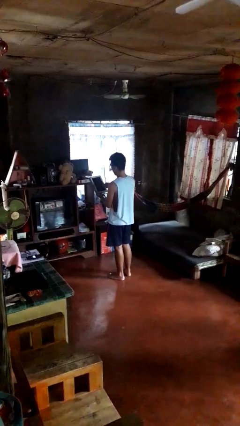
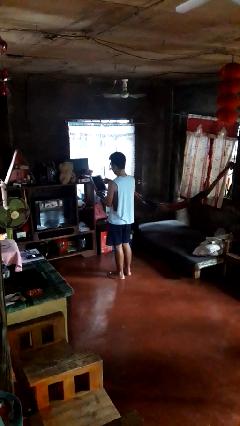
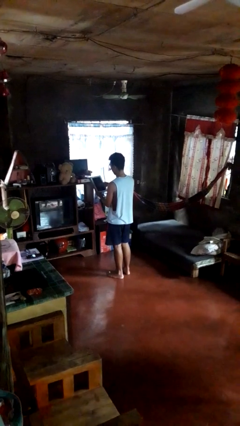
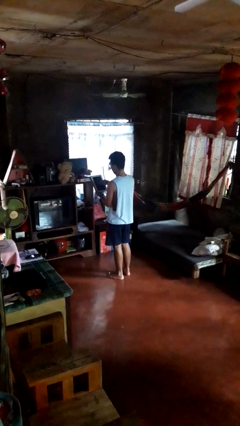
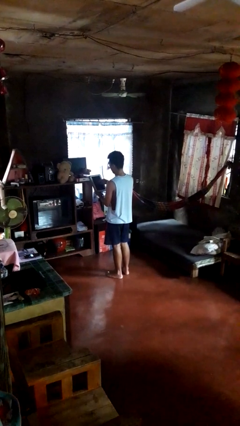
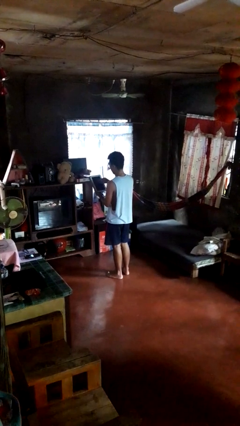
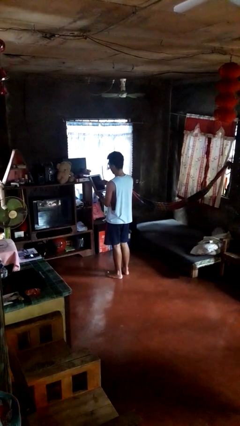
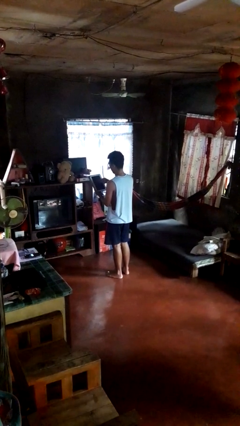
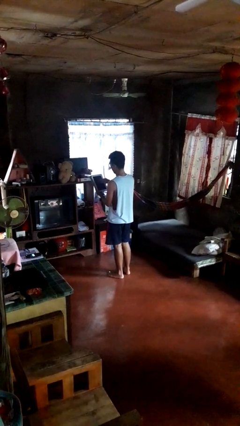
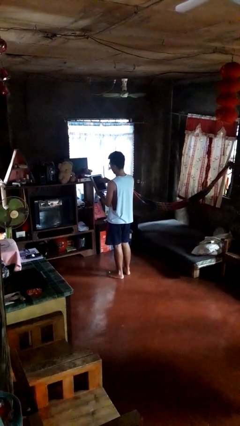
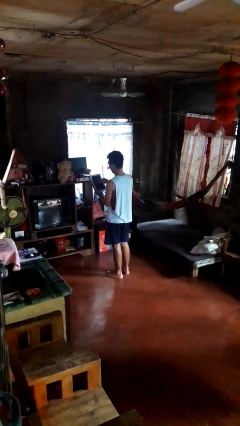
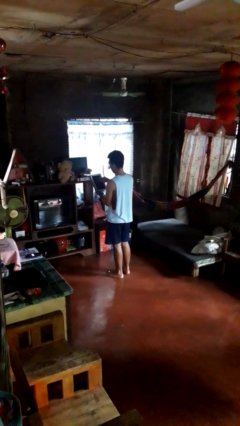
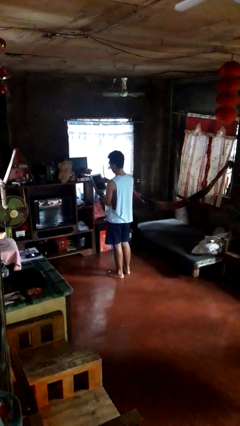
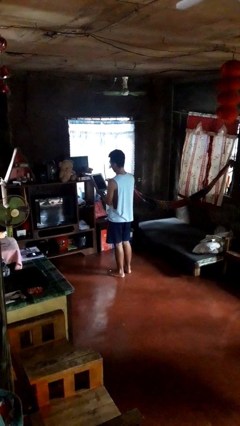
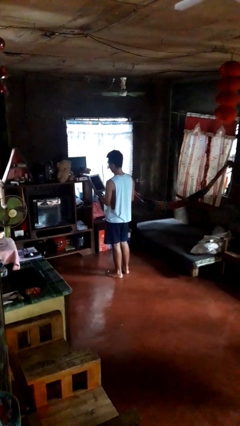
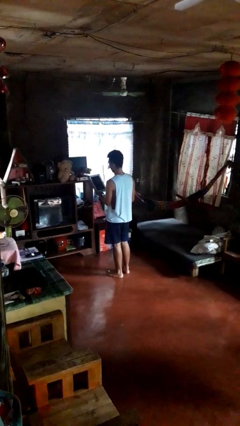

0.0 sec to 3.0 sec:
person interacts with tablet

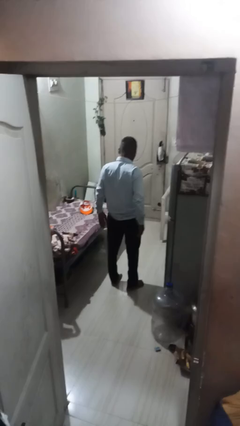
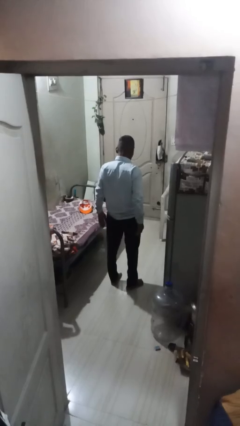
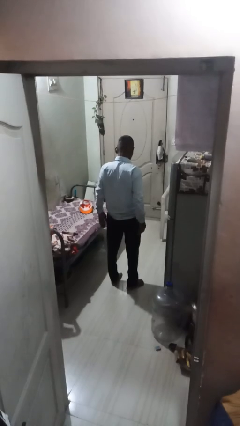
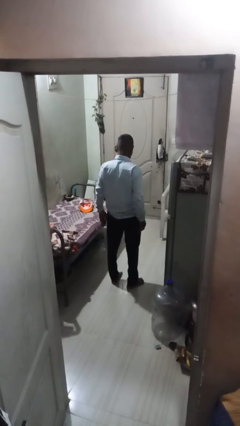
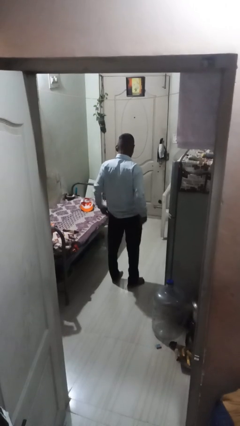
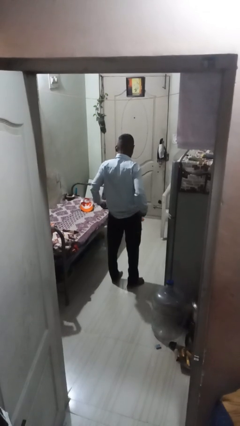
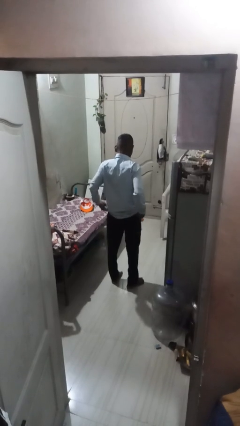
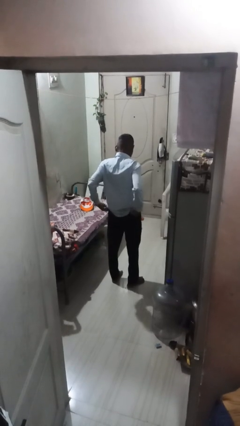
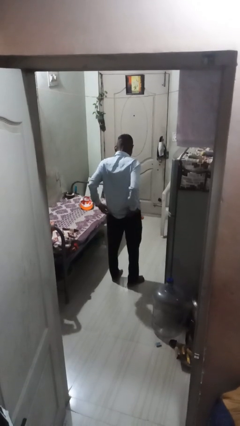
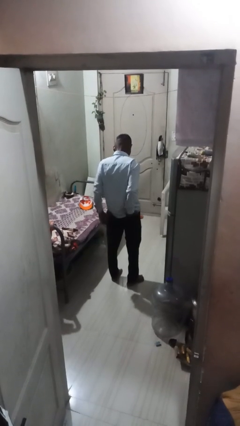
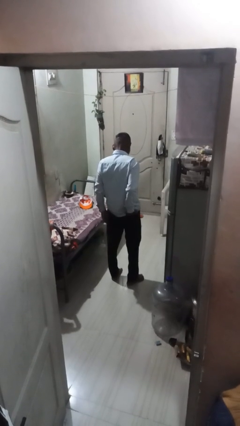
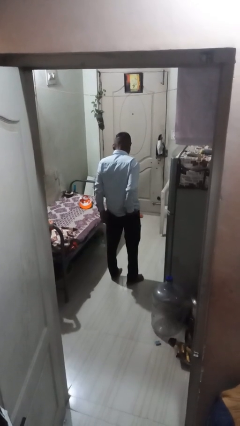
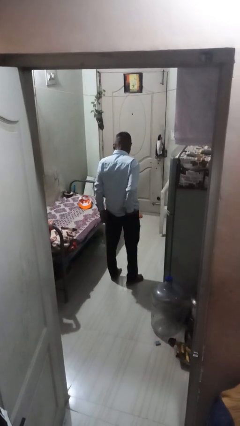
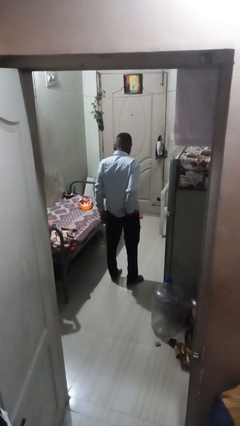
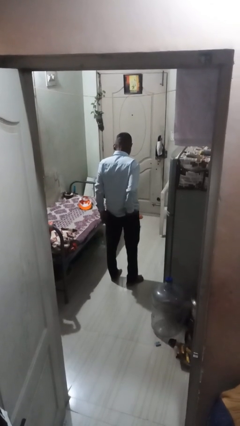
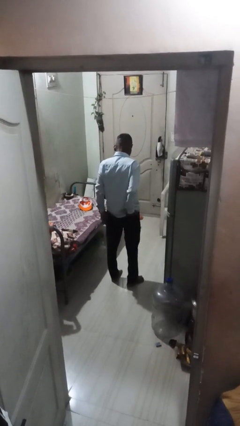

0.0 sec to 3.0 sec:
person puts hands in back pockets

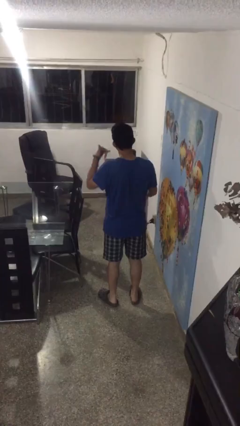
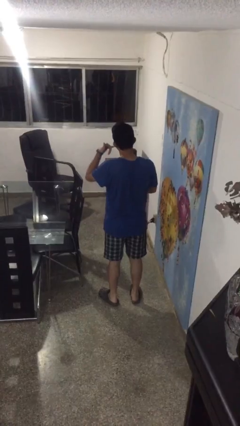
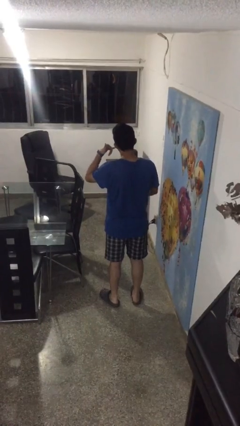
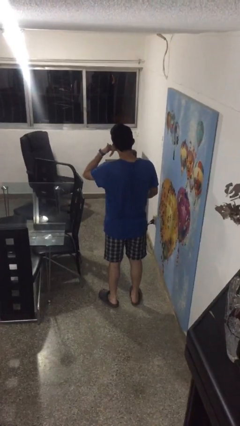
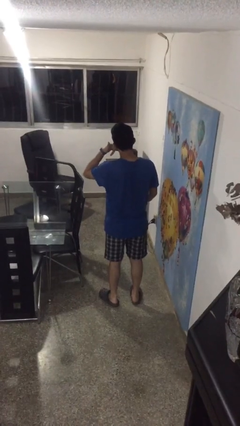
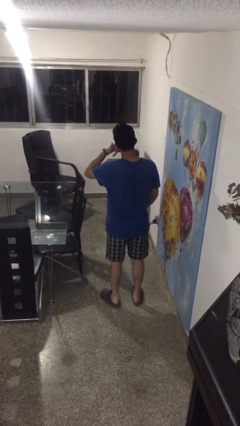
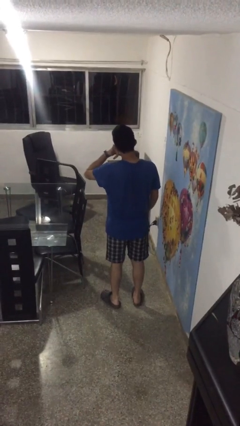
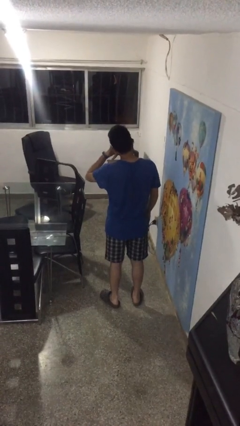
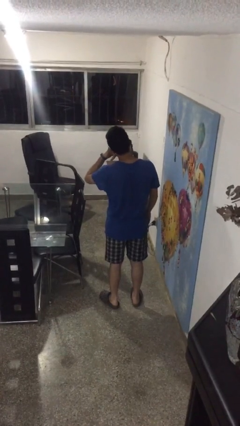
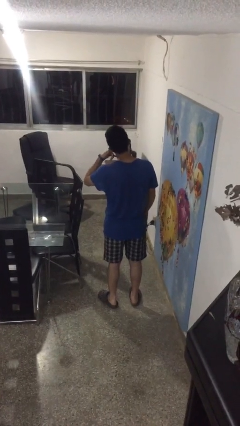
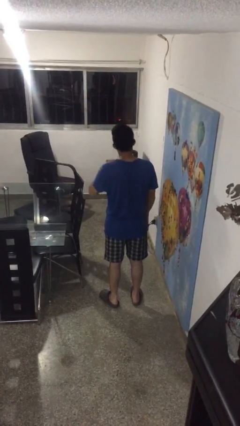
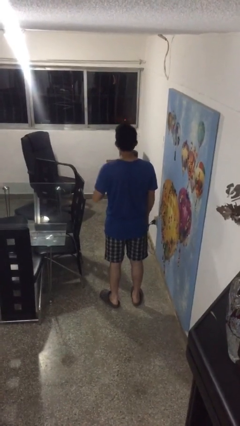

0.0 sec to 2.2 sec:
person gestures call me

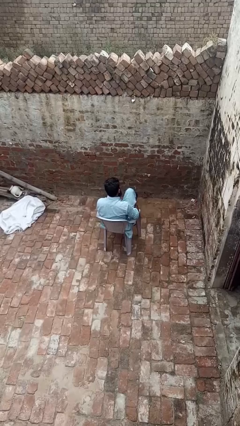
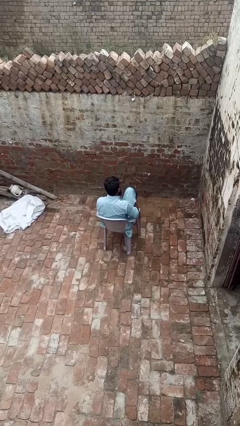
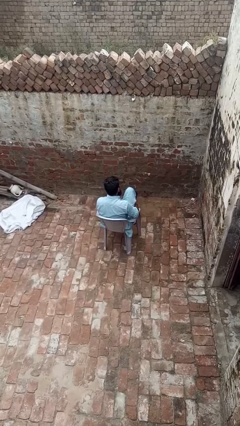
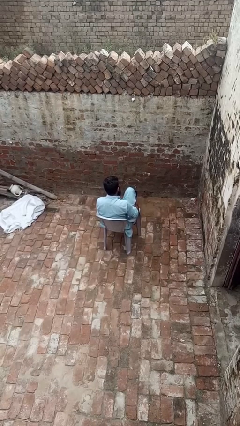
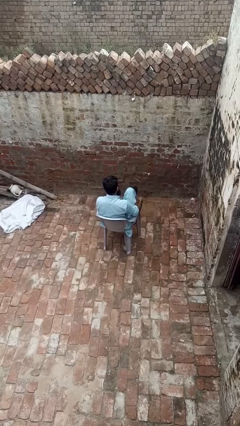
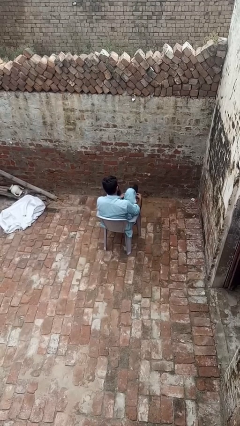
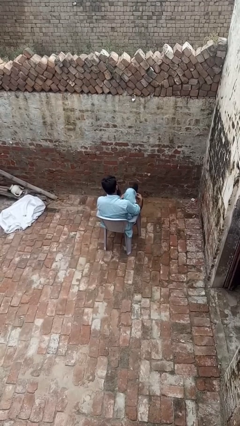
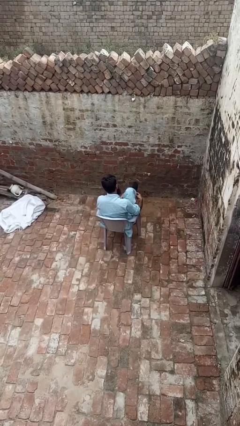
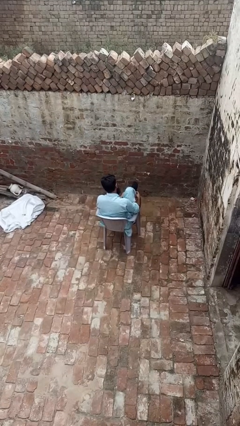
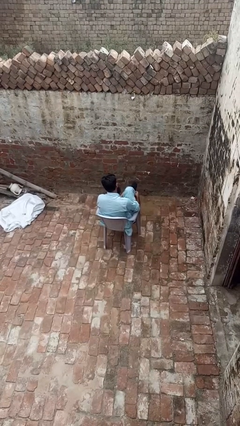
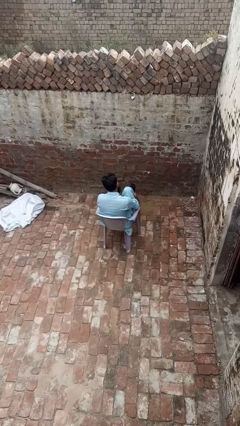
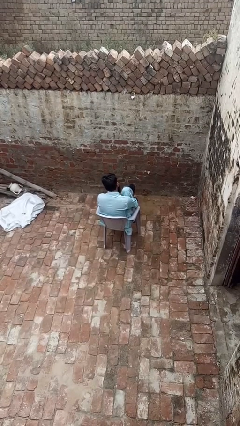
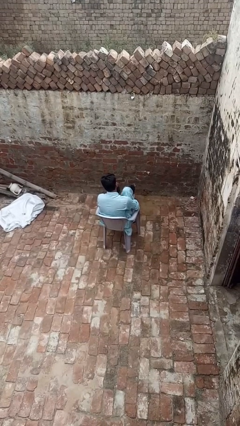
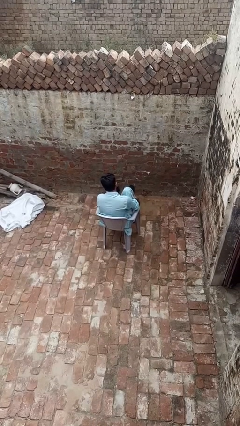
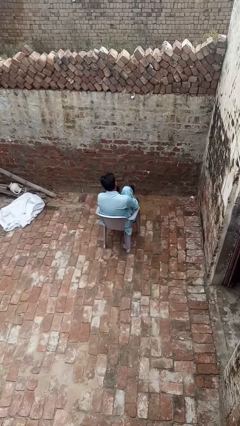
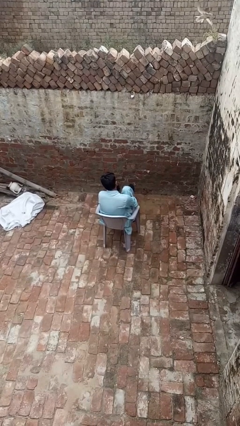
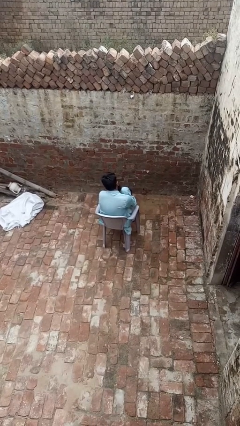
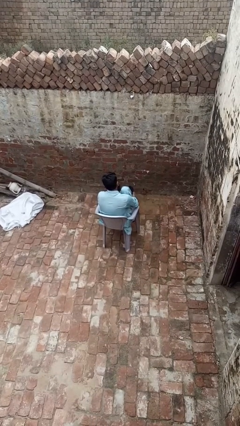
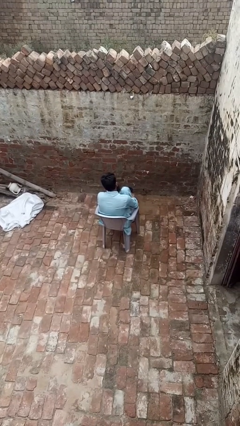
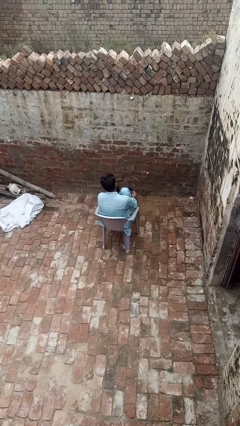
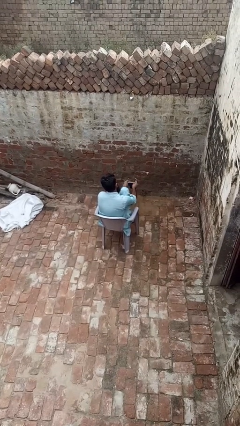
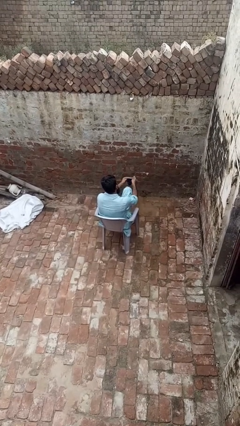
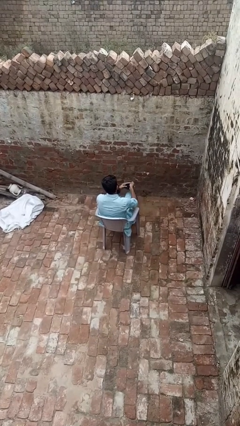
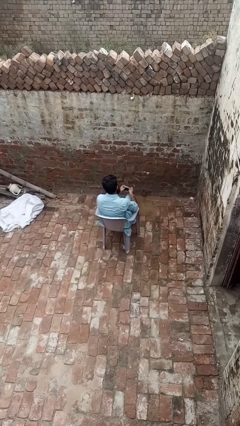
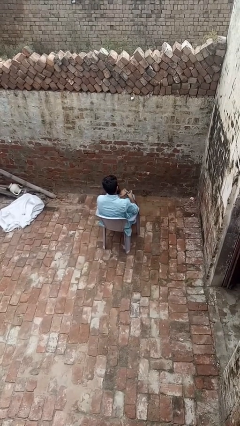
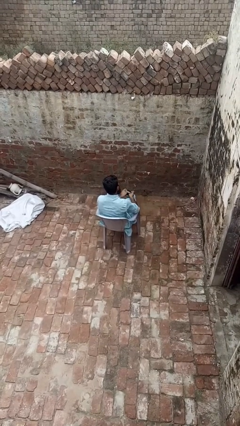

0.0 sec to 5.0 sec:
person takes off socks

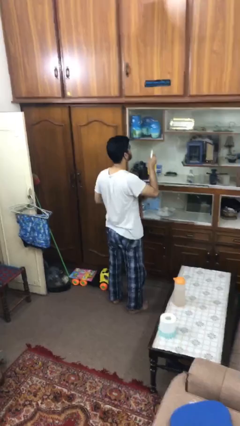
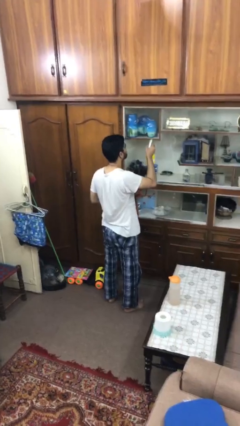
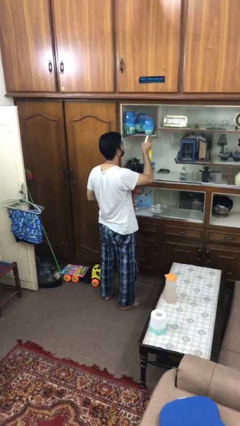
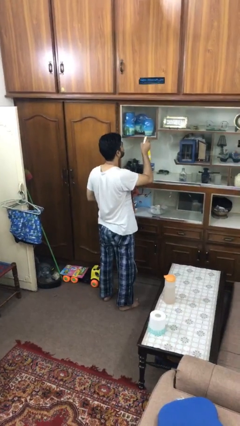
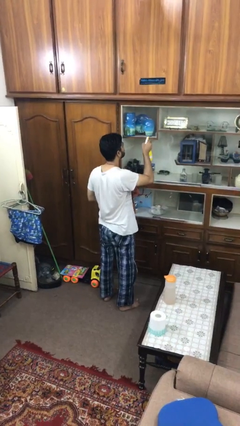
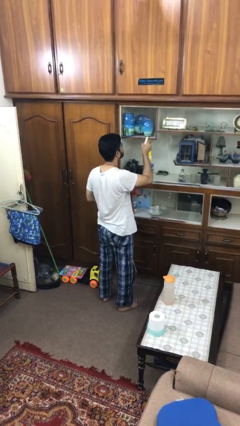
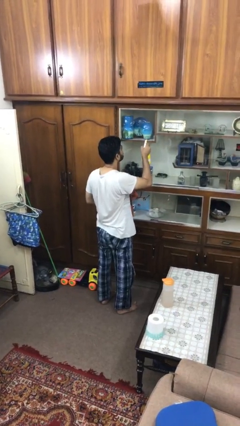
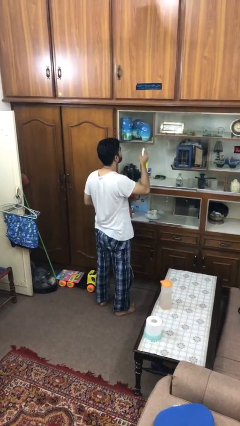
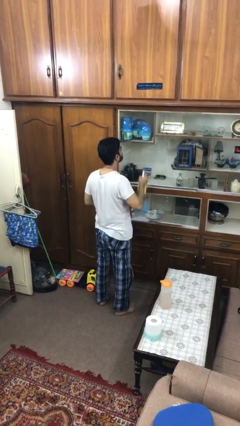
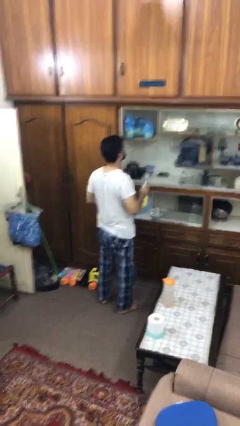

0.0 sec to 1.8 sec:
person sprays from bottle

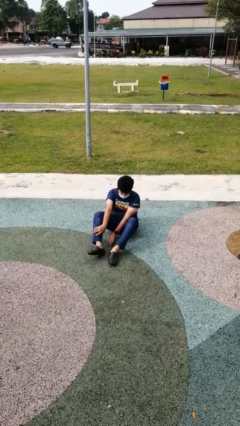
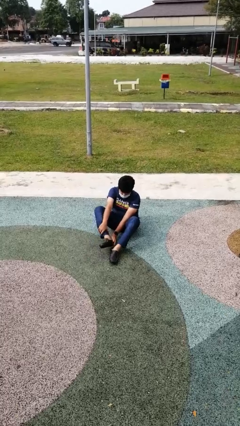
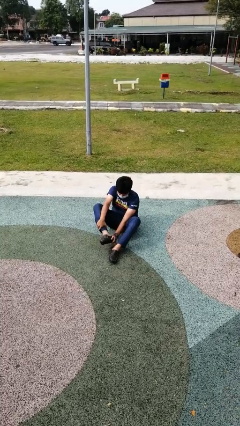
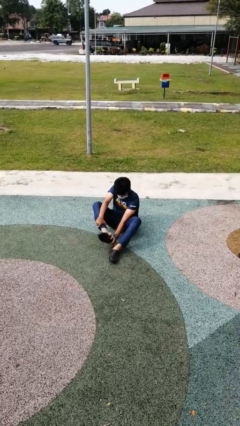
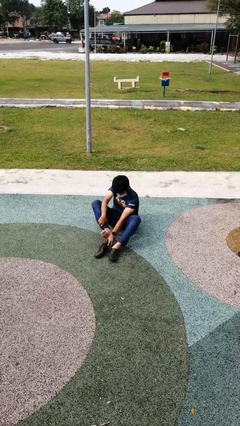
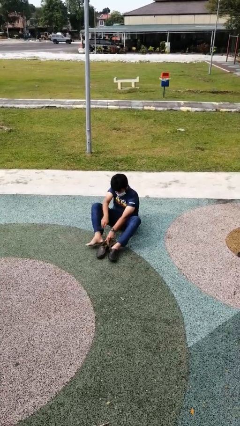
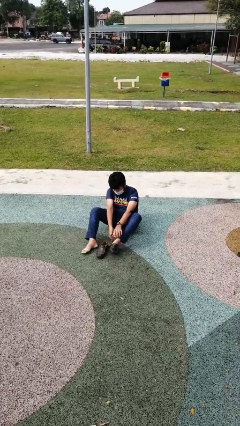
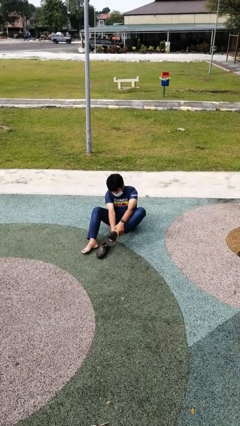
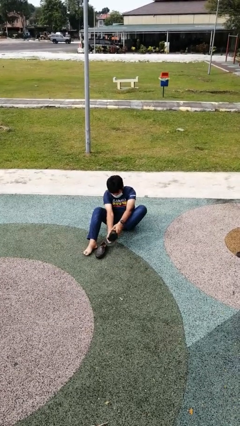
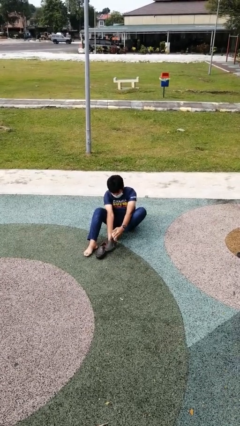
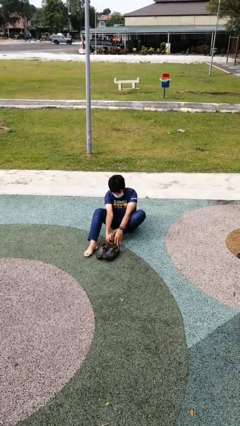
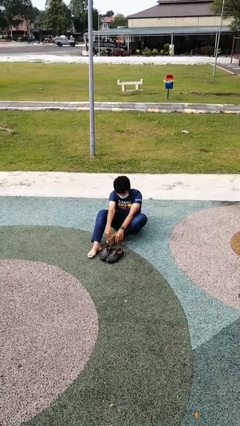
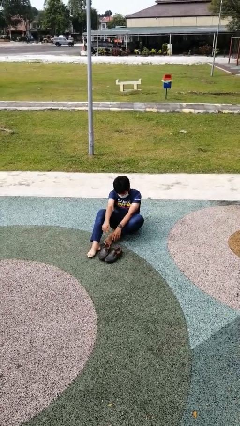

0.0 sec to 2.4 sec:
person takes off shoes
